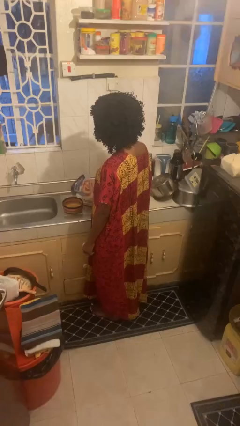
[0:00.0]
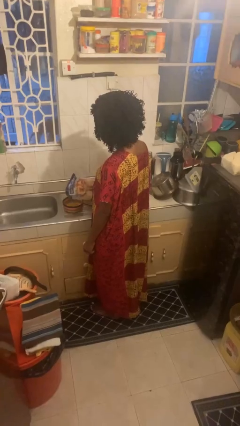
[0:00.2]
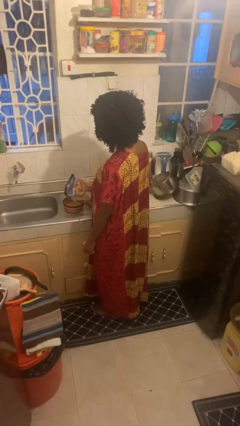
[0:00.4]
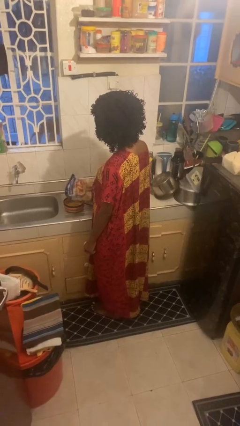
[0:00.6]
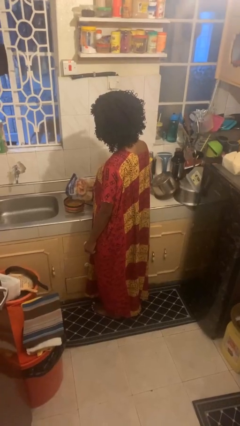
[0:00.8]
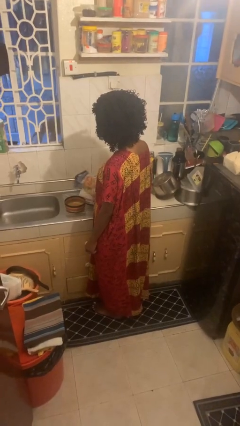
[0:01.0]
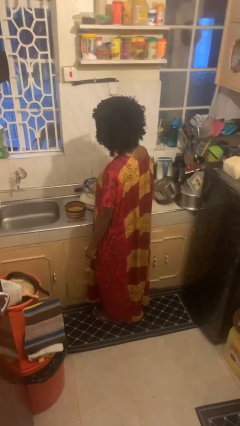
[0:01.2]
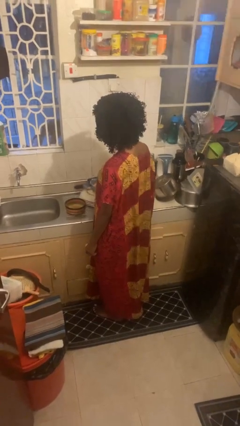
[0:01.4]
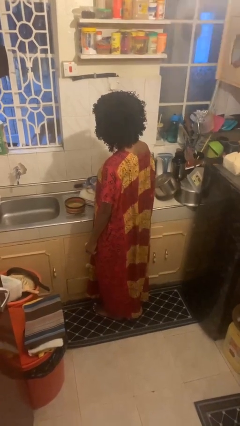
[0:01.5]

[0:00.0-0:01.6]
person pours into bowl

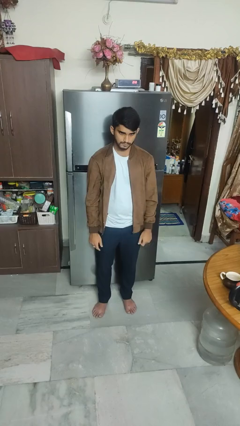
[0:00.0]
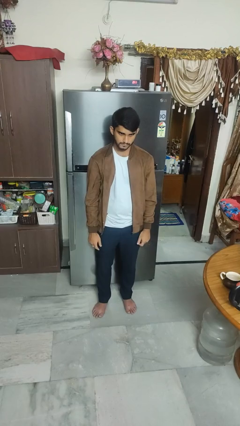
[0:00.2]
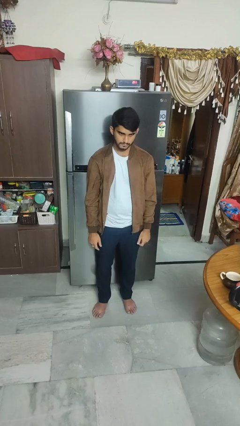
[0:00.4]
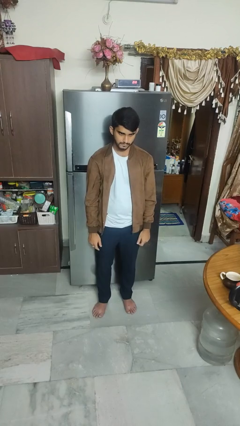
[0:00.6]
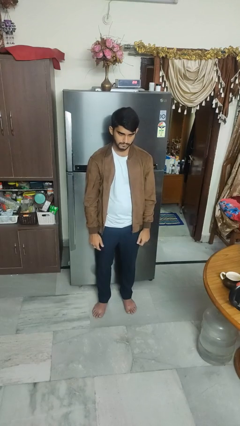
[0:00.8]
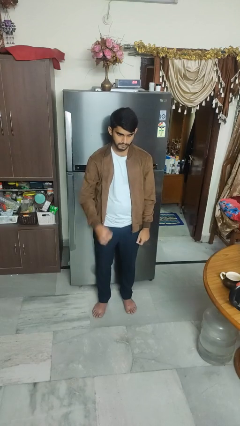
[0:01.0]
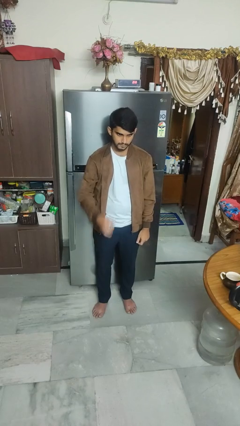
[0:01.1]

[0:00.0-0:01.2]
person gestures call me

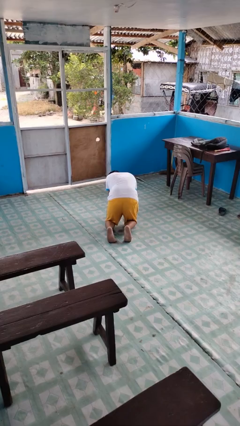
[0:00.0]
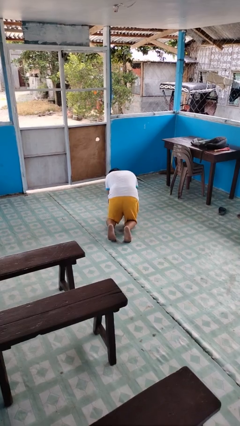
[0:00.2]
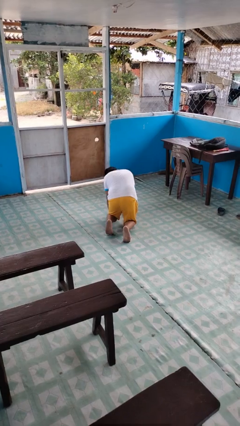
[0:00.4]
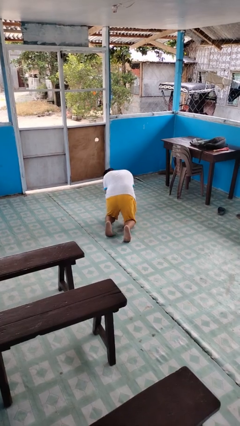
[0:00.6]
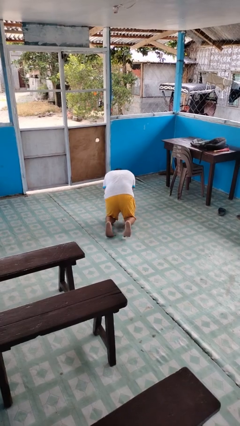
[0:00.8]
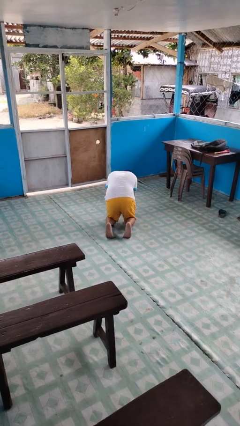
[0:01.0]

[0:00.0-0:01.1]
person crawls

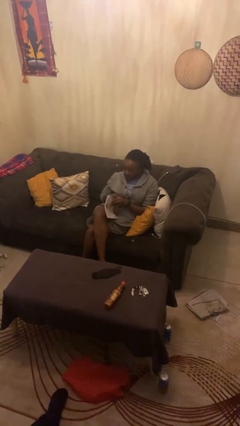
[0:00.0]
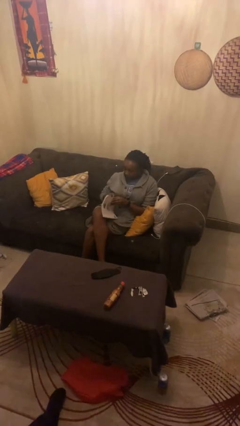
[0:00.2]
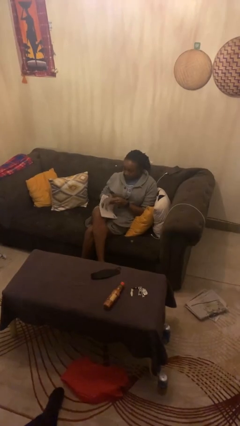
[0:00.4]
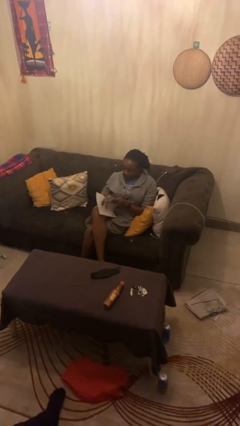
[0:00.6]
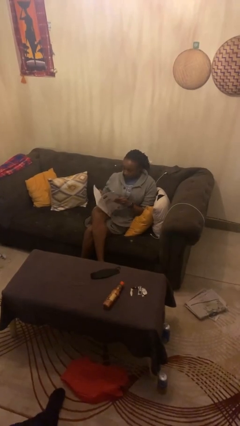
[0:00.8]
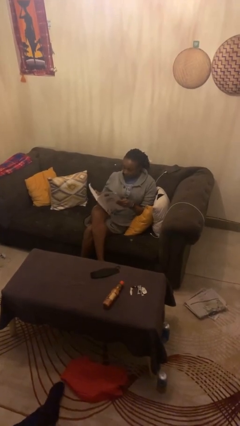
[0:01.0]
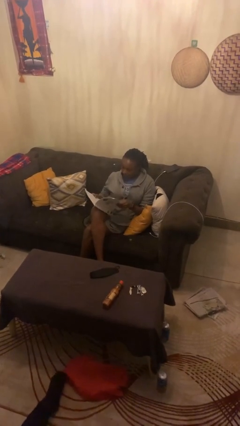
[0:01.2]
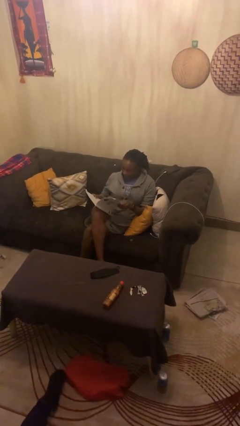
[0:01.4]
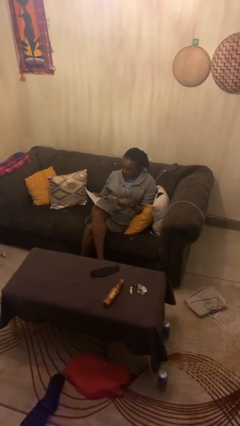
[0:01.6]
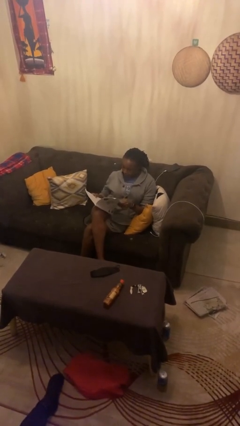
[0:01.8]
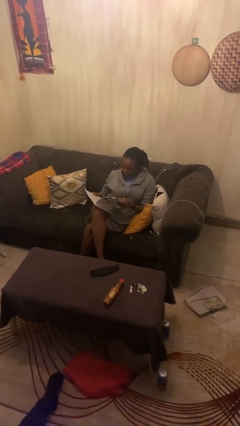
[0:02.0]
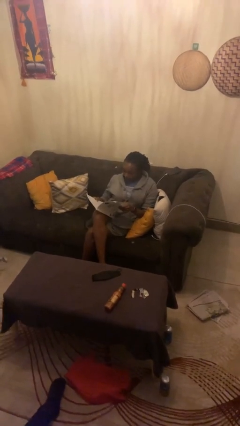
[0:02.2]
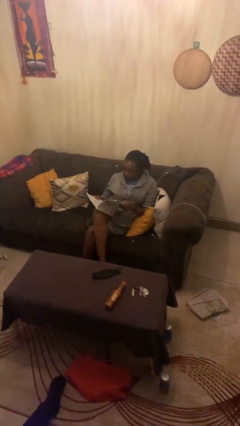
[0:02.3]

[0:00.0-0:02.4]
person reads magazine

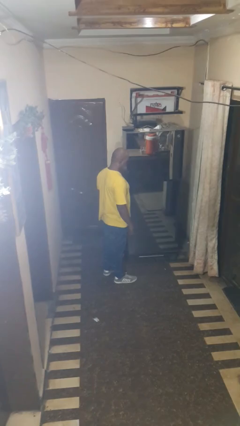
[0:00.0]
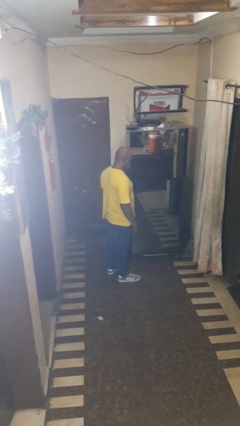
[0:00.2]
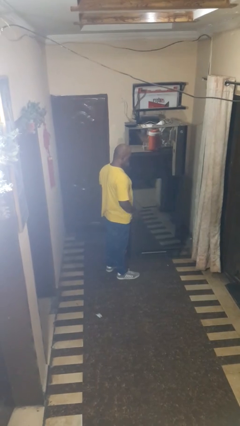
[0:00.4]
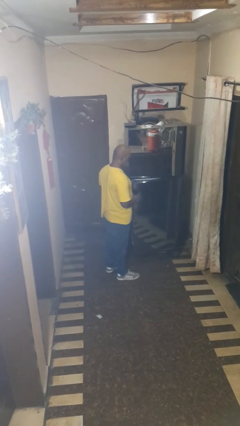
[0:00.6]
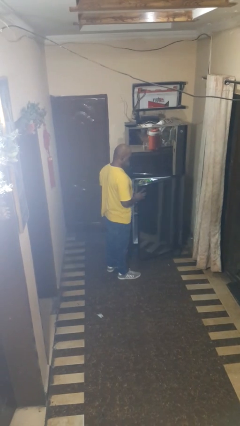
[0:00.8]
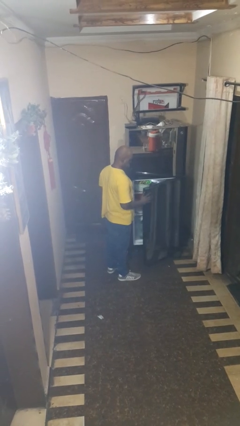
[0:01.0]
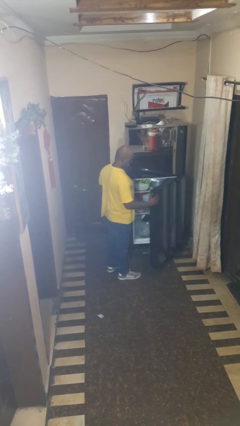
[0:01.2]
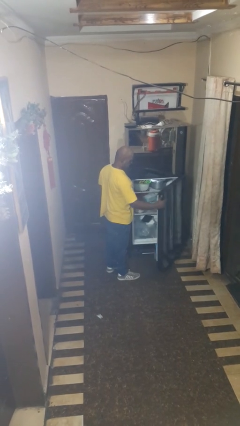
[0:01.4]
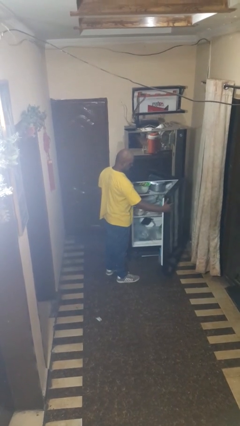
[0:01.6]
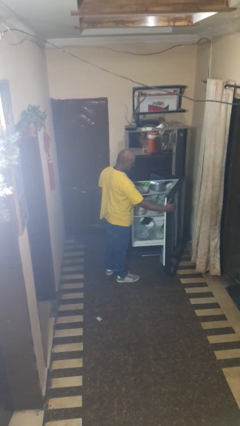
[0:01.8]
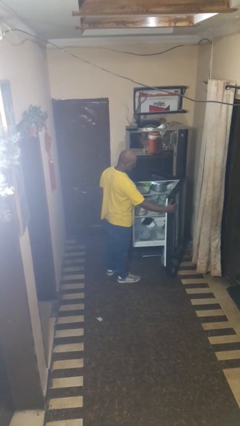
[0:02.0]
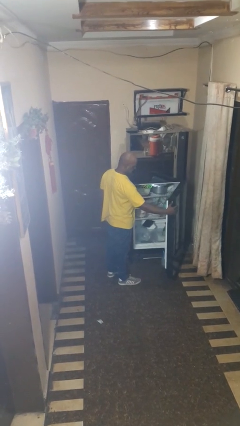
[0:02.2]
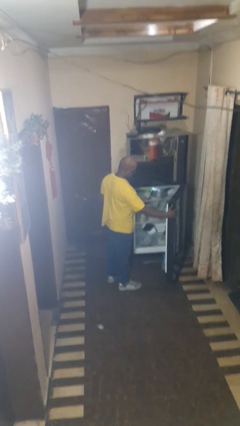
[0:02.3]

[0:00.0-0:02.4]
person opens refrigerator

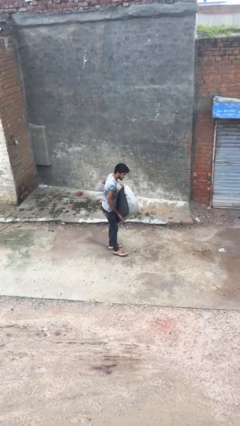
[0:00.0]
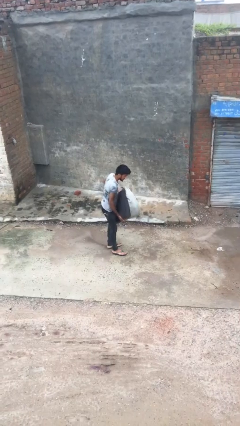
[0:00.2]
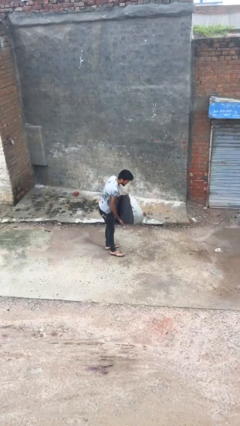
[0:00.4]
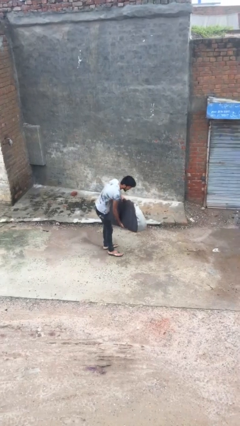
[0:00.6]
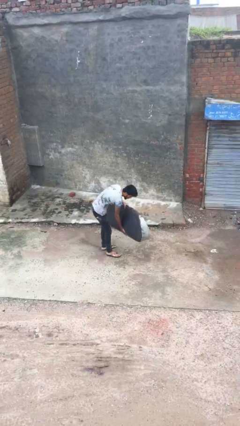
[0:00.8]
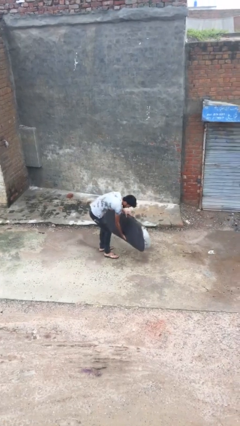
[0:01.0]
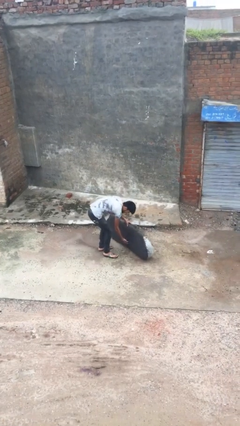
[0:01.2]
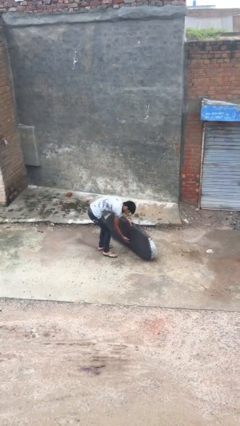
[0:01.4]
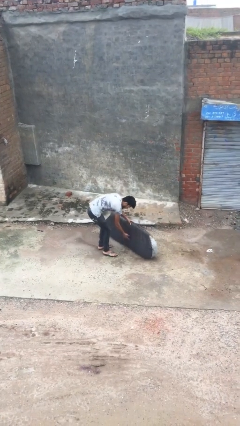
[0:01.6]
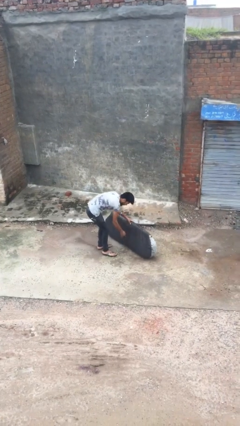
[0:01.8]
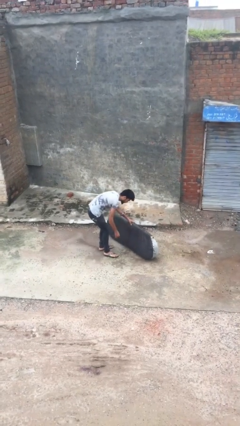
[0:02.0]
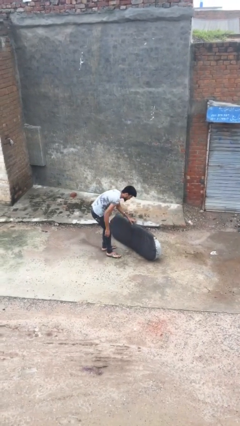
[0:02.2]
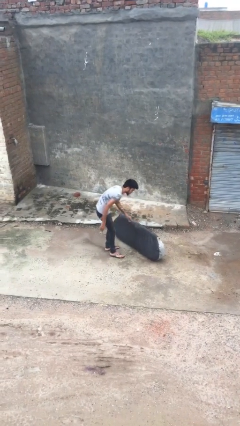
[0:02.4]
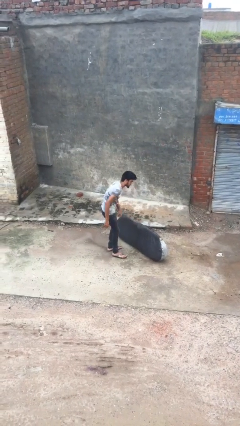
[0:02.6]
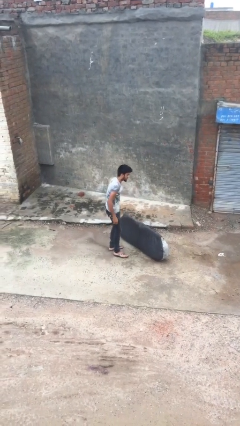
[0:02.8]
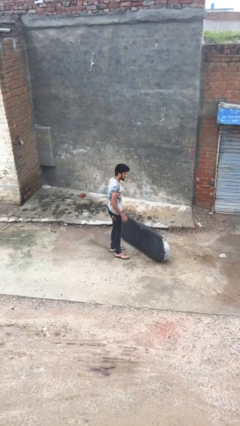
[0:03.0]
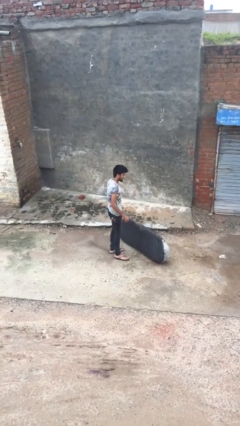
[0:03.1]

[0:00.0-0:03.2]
person puts down object on floor

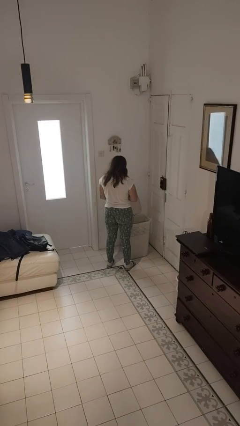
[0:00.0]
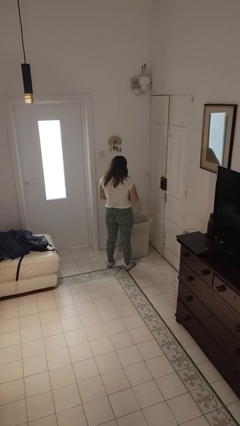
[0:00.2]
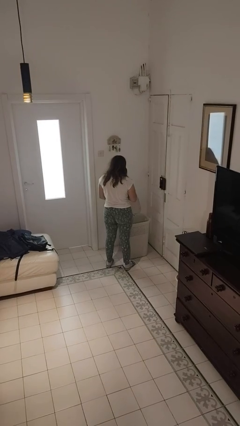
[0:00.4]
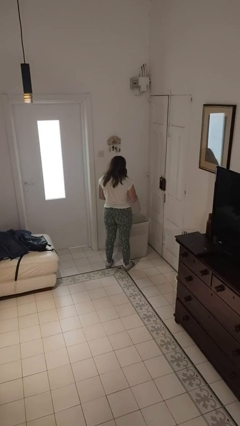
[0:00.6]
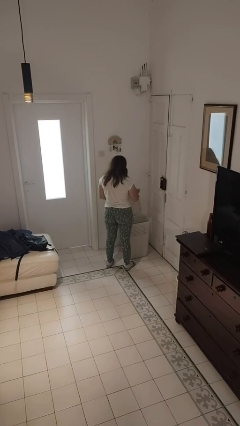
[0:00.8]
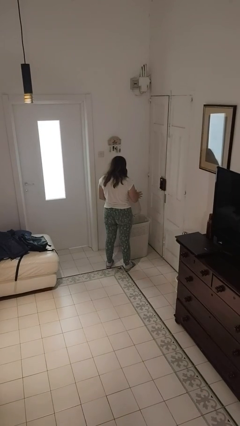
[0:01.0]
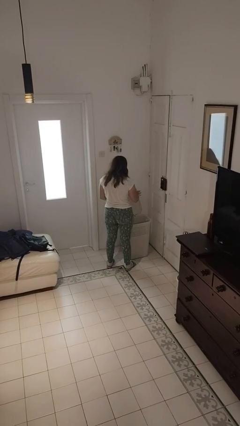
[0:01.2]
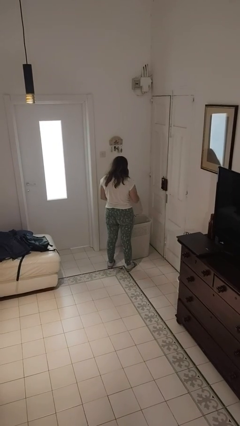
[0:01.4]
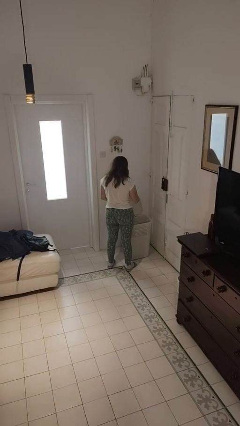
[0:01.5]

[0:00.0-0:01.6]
person discards trash

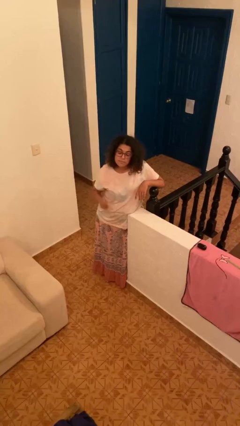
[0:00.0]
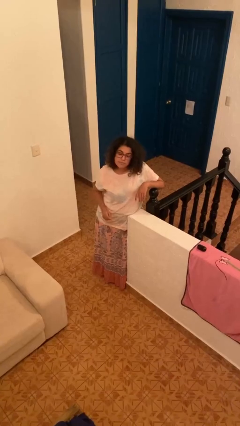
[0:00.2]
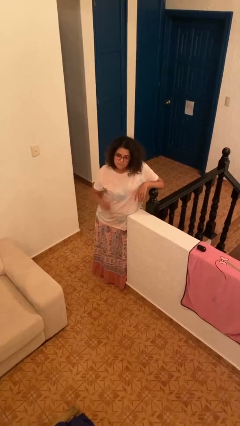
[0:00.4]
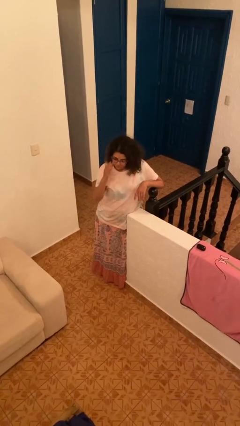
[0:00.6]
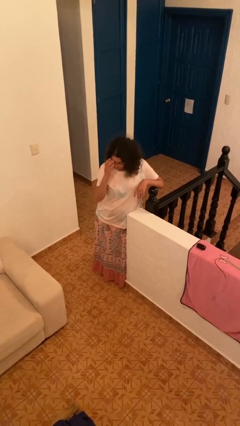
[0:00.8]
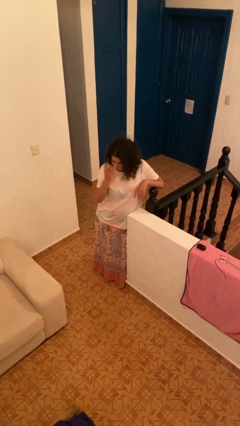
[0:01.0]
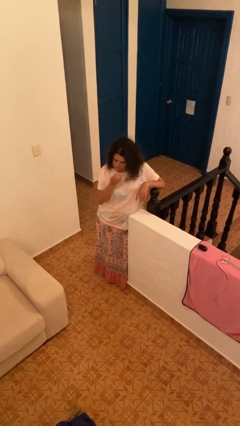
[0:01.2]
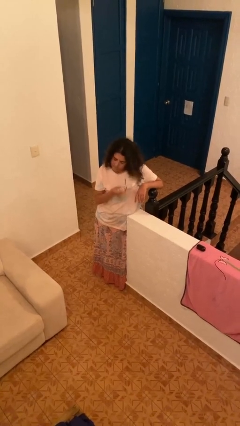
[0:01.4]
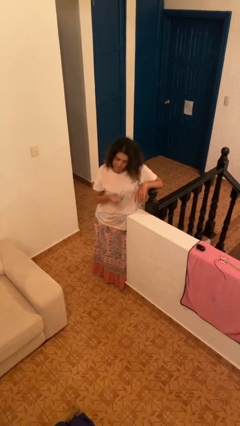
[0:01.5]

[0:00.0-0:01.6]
person takes off glasses

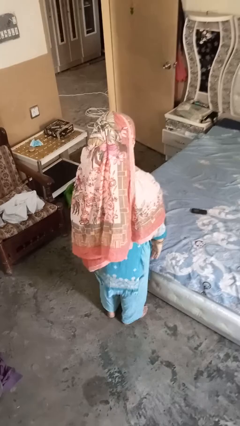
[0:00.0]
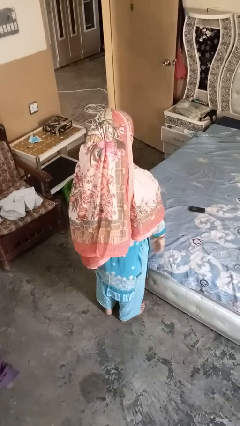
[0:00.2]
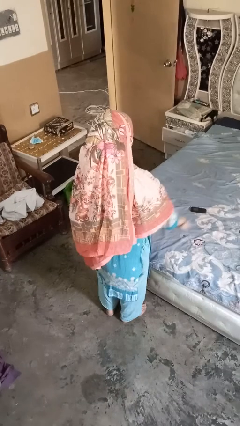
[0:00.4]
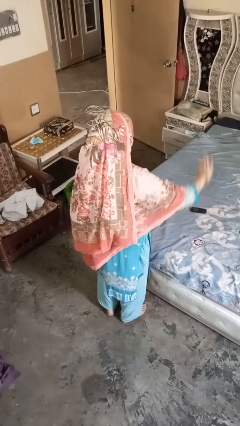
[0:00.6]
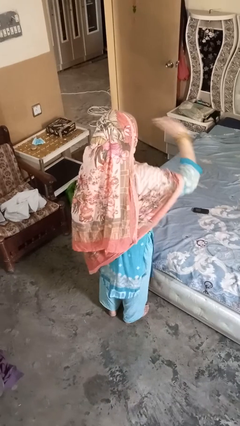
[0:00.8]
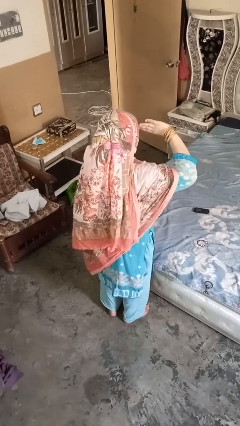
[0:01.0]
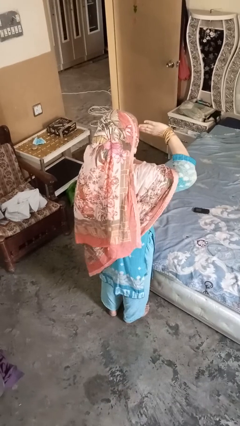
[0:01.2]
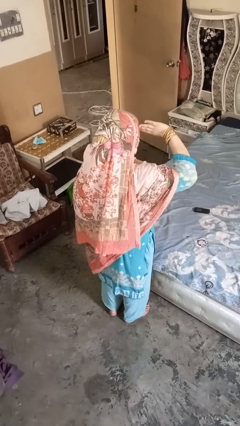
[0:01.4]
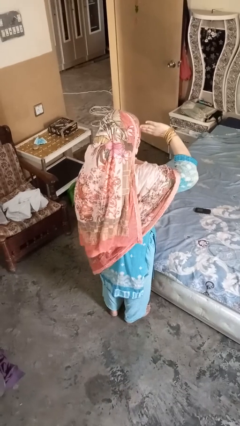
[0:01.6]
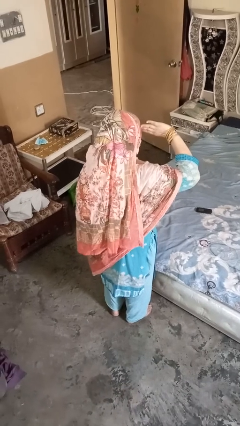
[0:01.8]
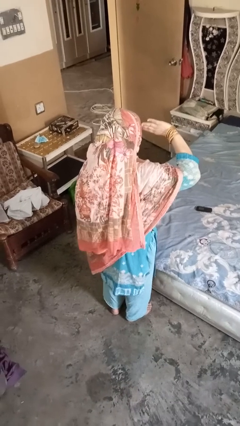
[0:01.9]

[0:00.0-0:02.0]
person salutes
